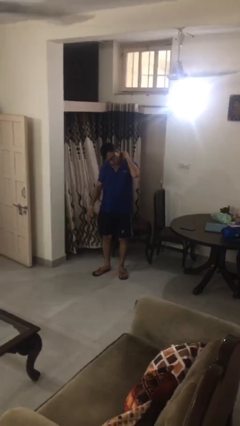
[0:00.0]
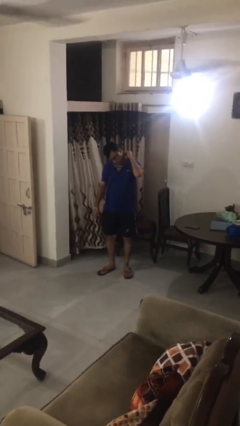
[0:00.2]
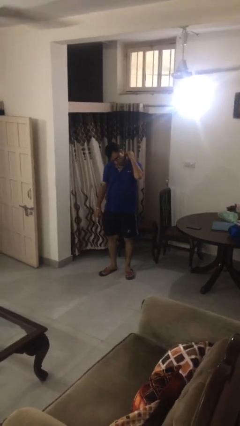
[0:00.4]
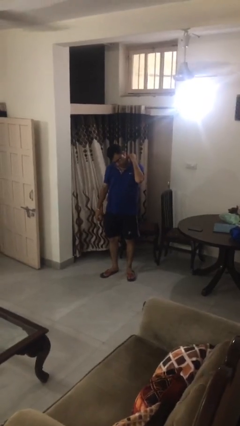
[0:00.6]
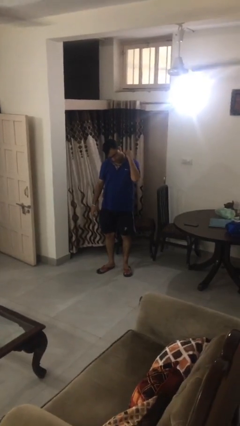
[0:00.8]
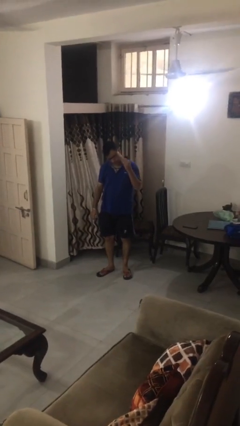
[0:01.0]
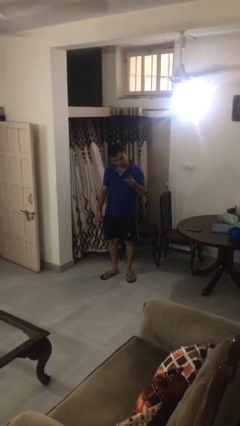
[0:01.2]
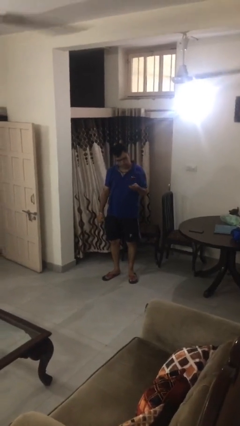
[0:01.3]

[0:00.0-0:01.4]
person swats bug

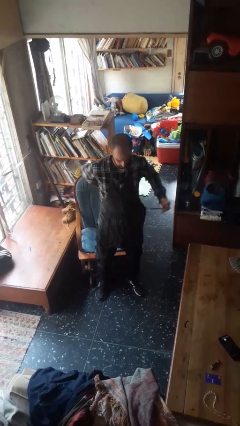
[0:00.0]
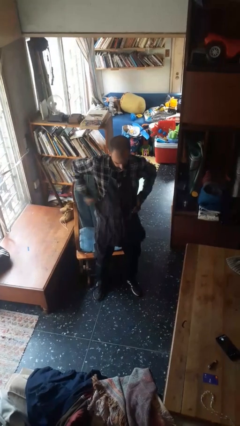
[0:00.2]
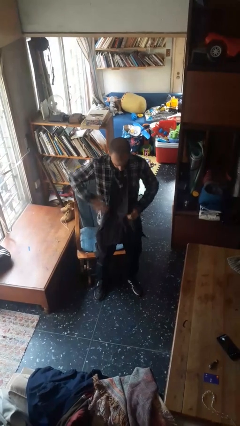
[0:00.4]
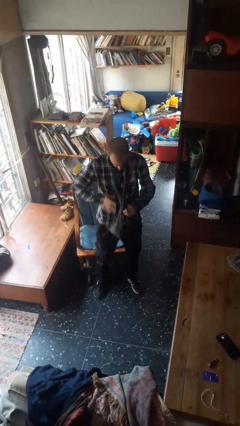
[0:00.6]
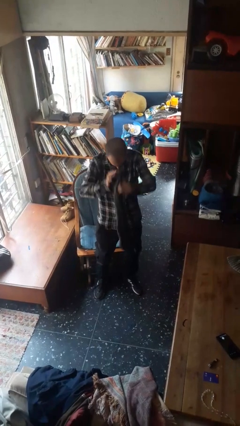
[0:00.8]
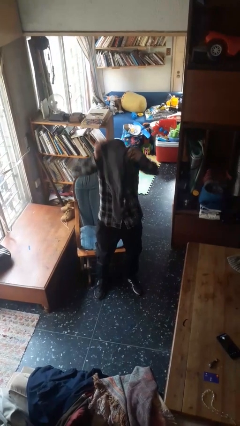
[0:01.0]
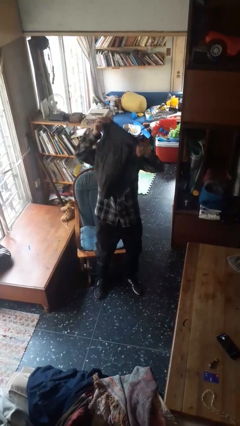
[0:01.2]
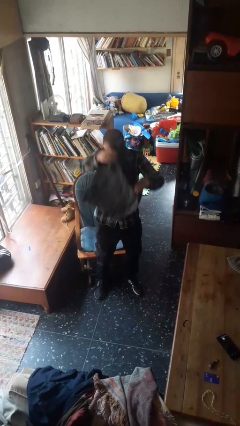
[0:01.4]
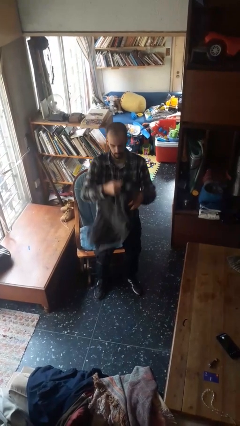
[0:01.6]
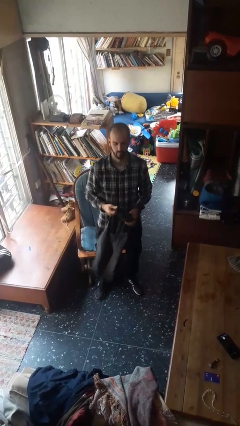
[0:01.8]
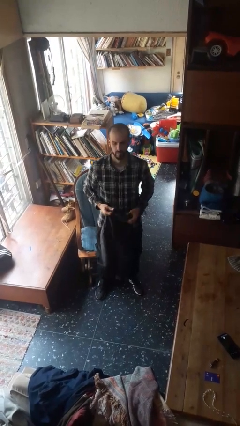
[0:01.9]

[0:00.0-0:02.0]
person takes off apron

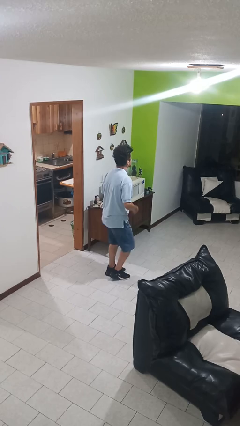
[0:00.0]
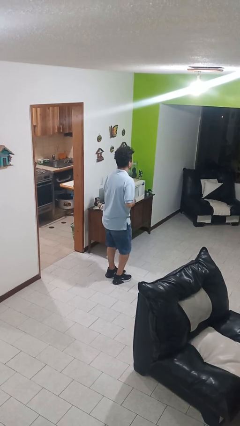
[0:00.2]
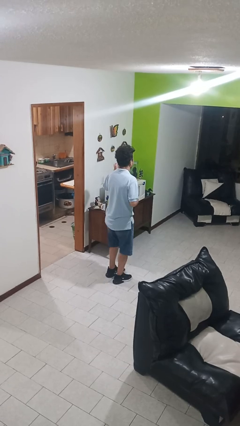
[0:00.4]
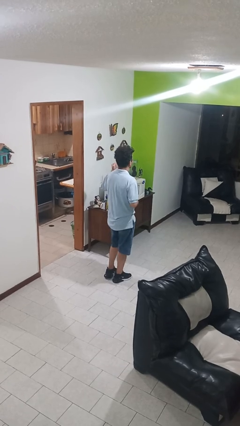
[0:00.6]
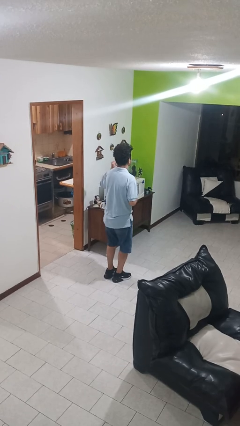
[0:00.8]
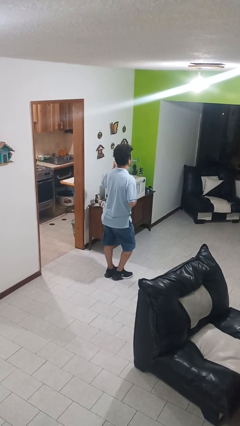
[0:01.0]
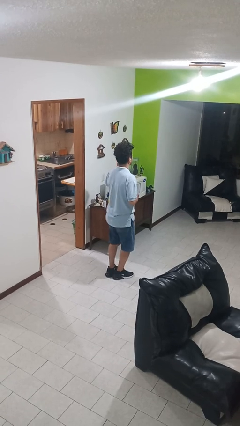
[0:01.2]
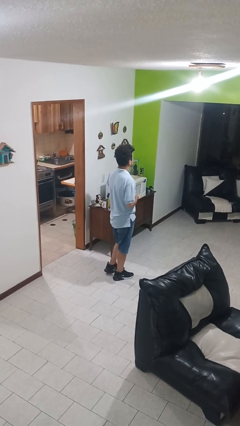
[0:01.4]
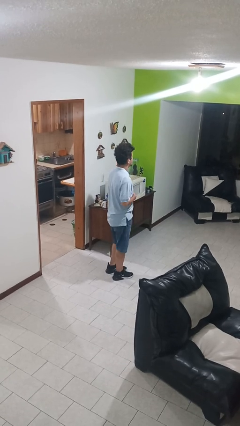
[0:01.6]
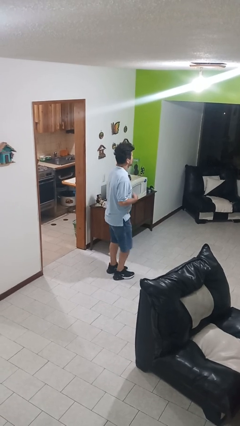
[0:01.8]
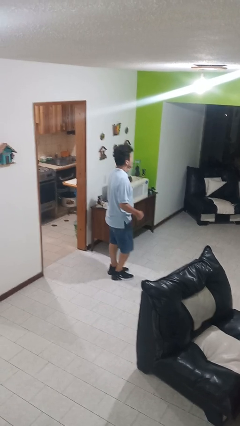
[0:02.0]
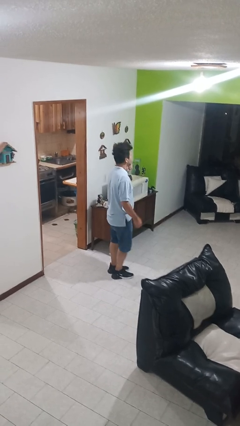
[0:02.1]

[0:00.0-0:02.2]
person dances in place

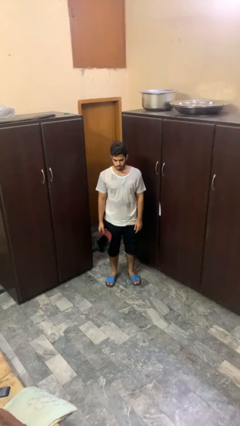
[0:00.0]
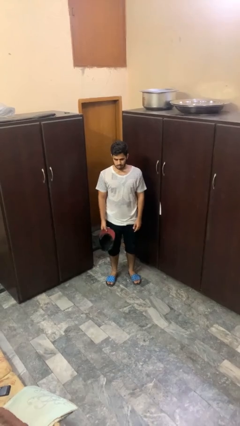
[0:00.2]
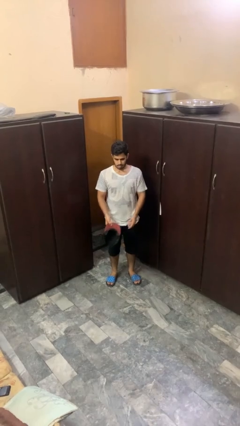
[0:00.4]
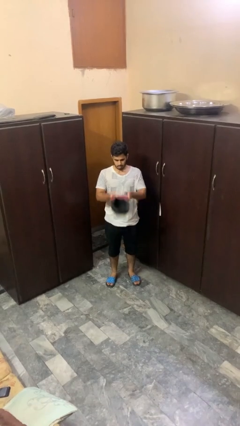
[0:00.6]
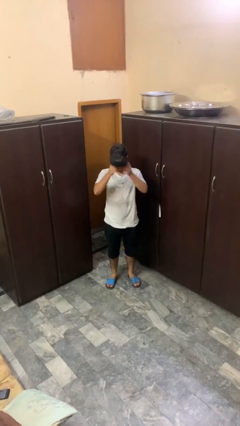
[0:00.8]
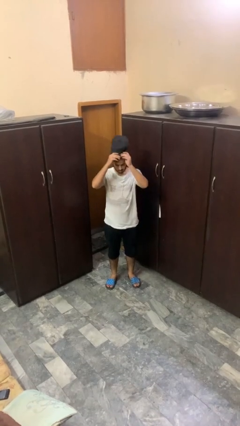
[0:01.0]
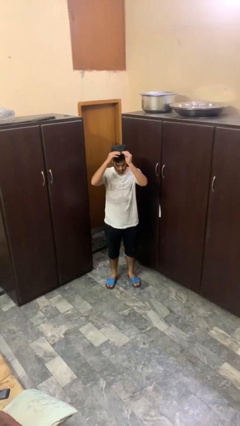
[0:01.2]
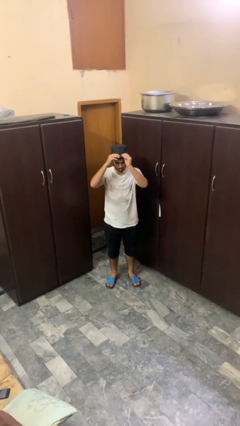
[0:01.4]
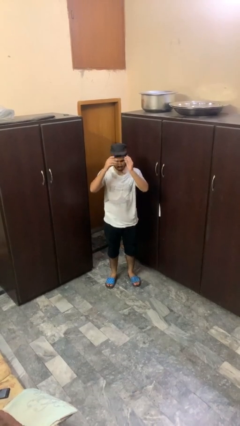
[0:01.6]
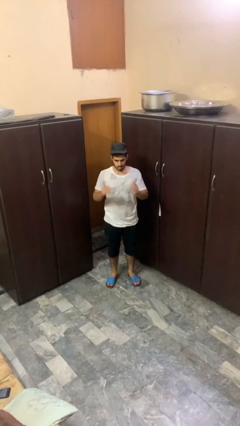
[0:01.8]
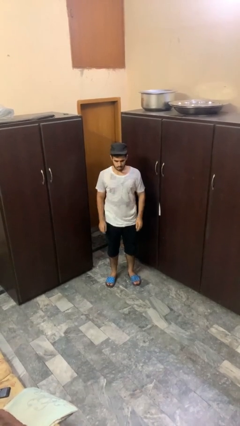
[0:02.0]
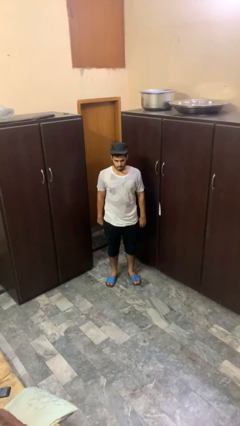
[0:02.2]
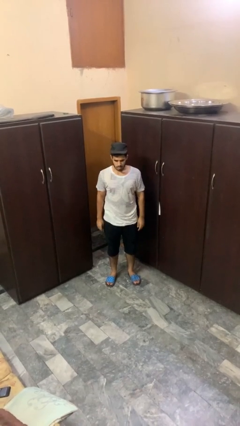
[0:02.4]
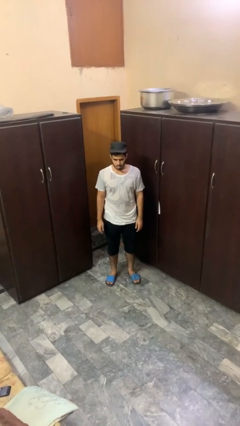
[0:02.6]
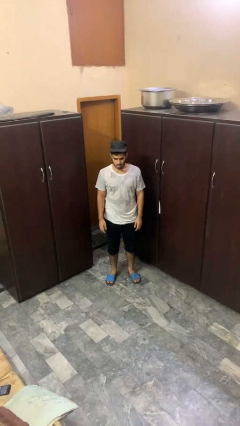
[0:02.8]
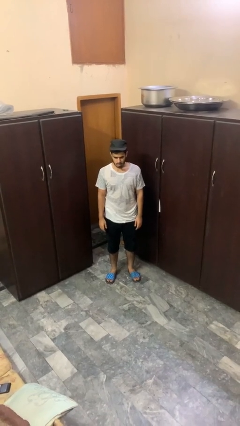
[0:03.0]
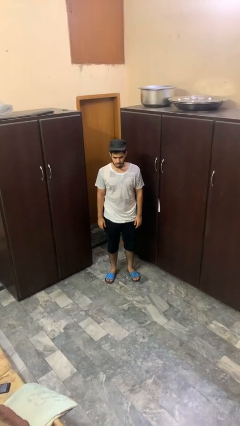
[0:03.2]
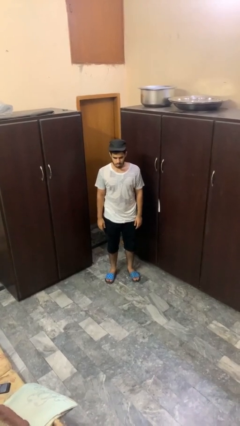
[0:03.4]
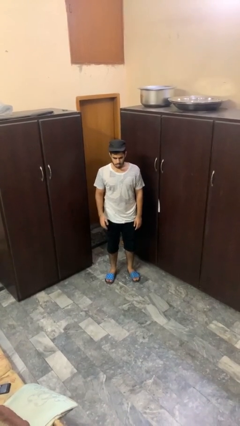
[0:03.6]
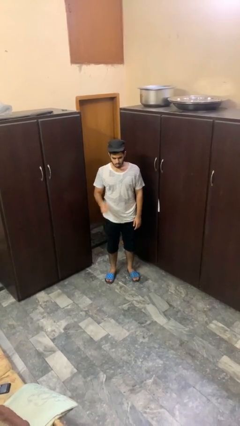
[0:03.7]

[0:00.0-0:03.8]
person puts on hat

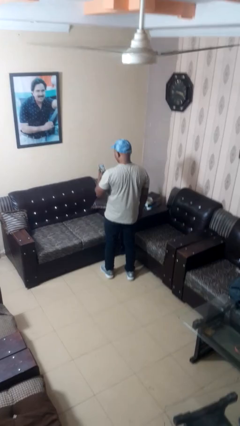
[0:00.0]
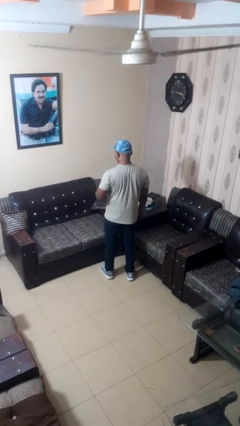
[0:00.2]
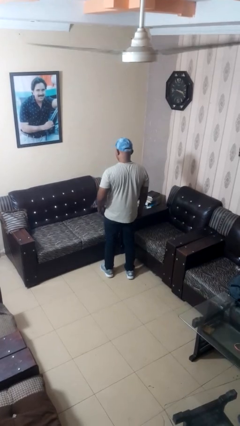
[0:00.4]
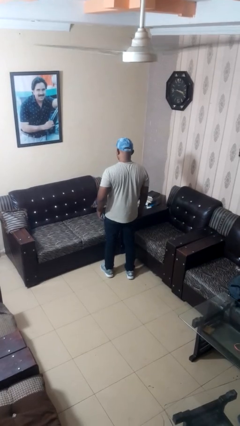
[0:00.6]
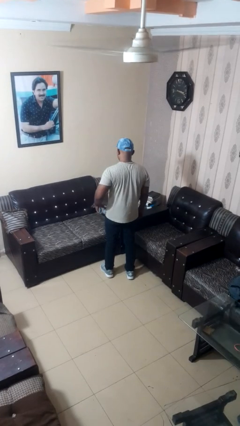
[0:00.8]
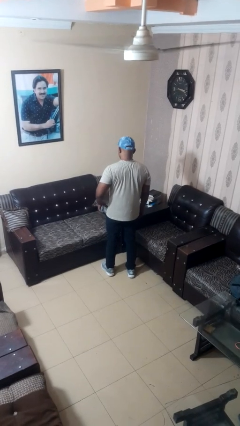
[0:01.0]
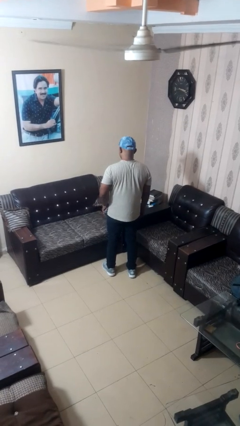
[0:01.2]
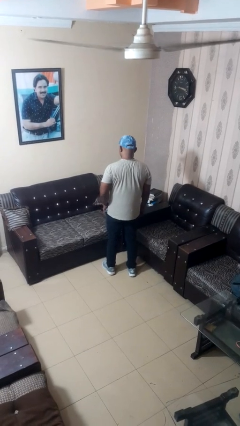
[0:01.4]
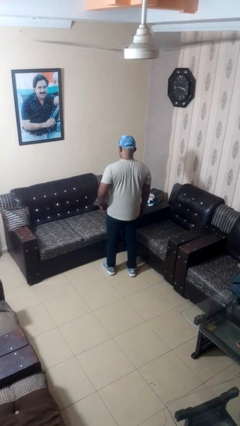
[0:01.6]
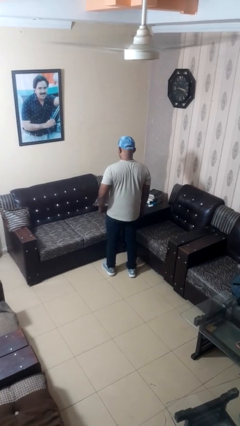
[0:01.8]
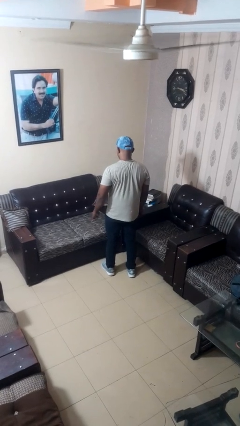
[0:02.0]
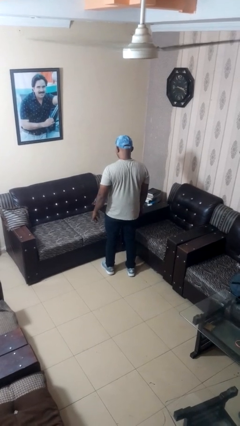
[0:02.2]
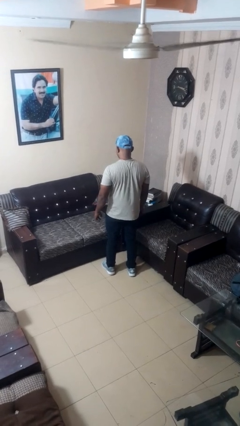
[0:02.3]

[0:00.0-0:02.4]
person puts phone into pocket

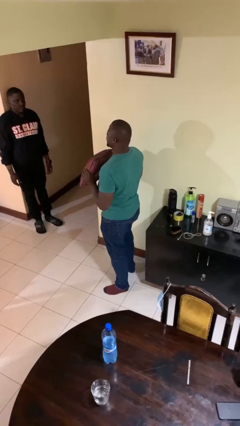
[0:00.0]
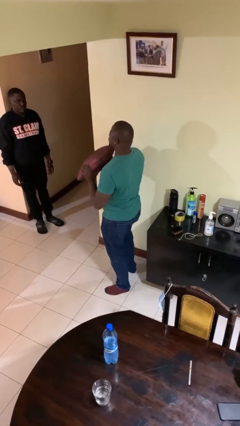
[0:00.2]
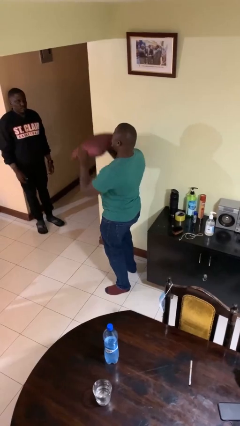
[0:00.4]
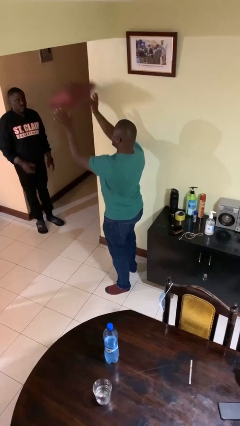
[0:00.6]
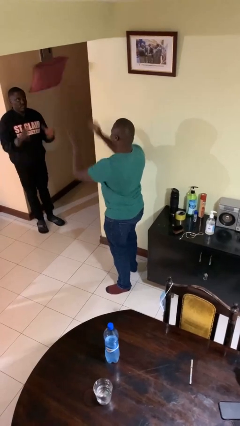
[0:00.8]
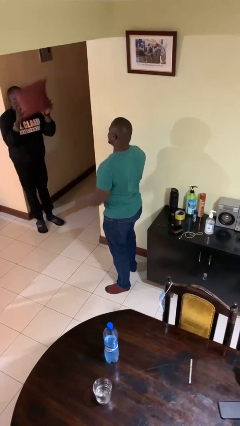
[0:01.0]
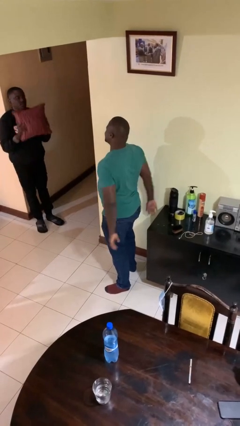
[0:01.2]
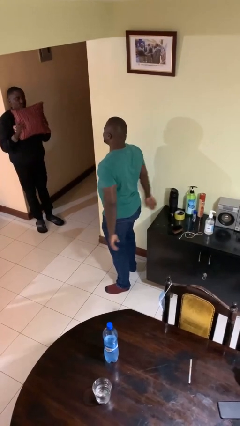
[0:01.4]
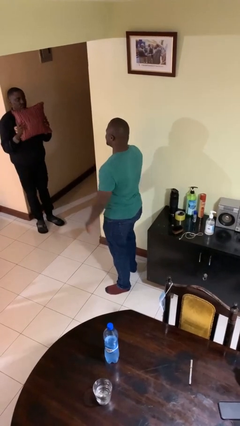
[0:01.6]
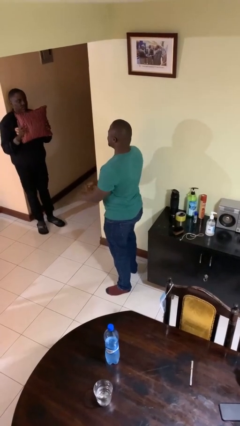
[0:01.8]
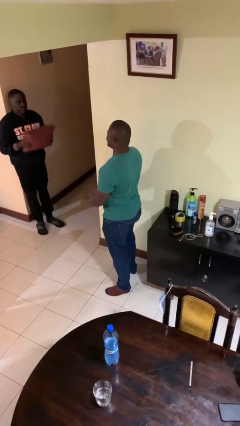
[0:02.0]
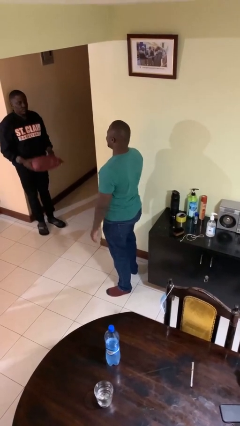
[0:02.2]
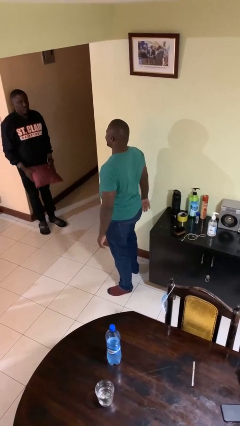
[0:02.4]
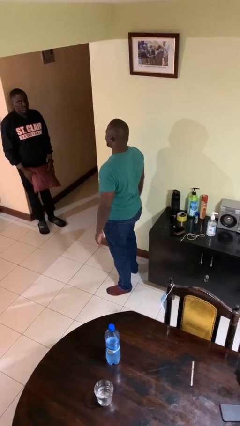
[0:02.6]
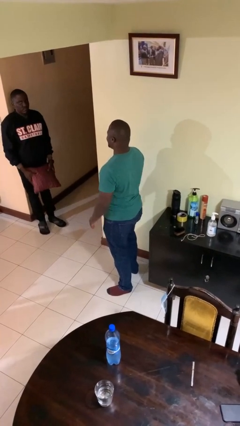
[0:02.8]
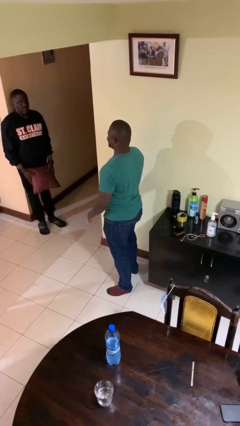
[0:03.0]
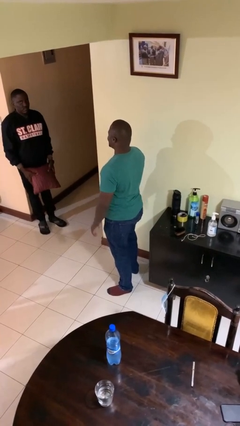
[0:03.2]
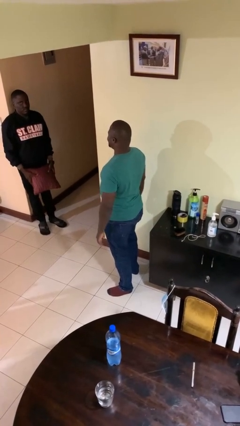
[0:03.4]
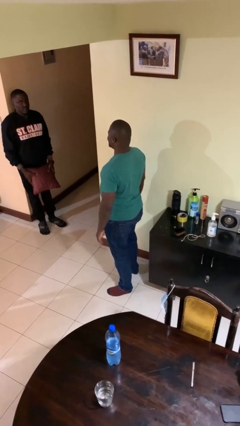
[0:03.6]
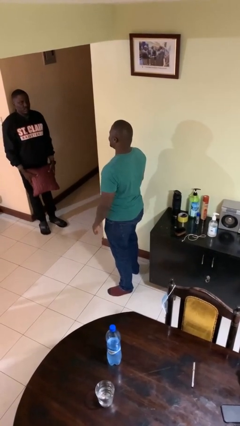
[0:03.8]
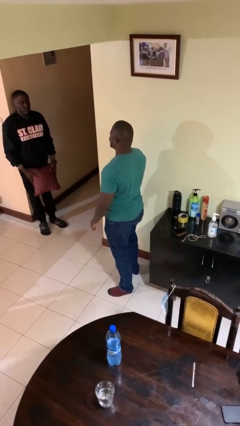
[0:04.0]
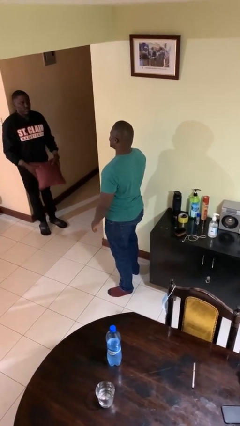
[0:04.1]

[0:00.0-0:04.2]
person throws object to person

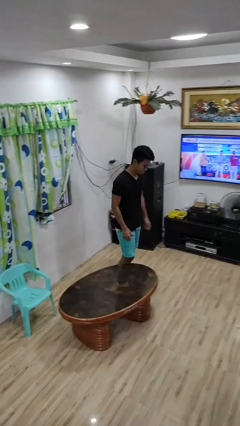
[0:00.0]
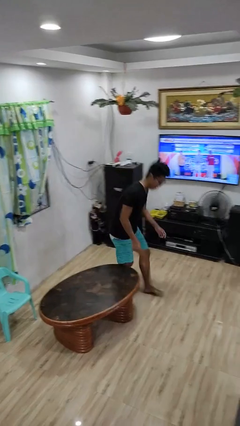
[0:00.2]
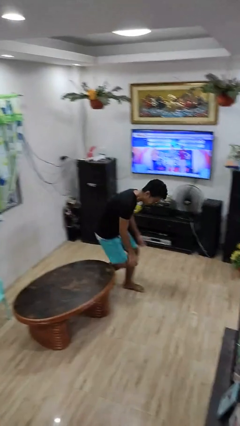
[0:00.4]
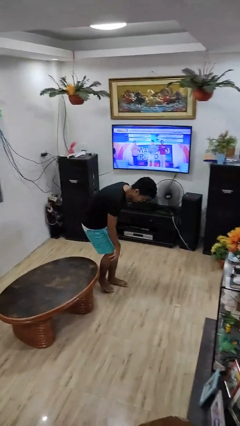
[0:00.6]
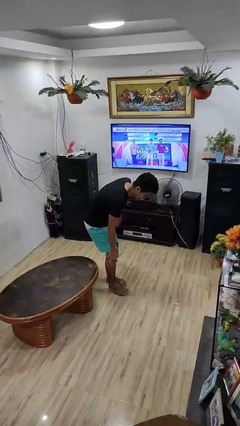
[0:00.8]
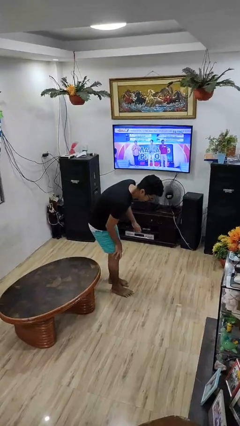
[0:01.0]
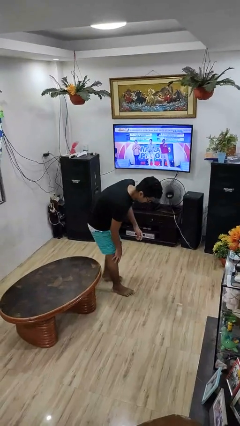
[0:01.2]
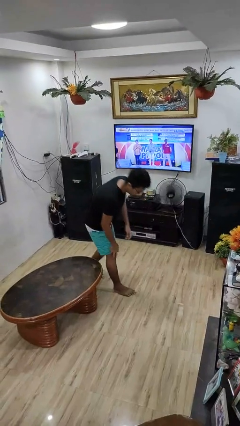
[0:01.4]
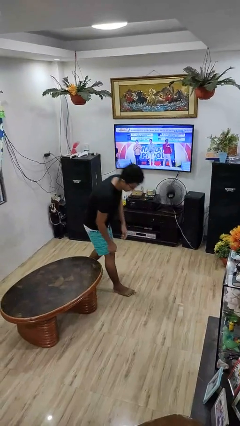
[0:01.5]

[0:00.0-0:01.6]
person bumps into table
